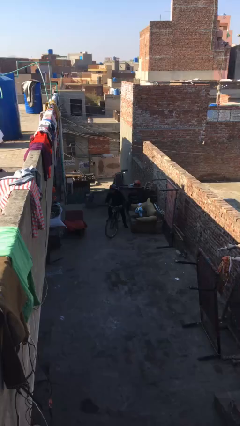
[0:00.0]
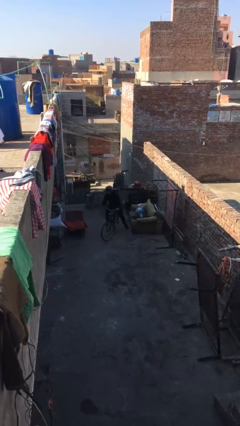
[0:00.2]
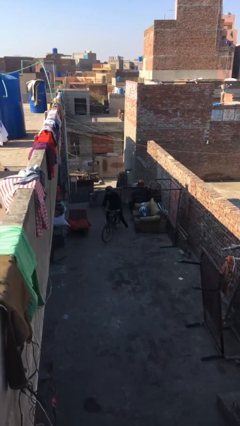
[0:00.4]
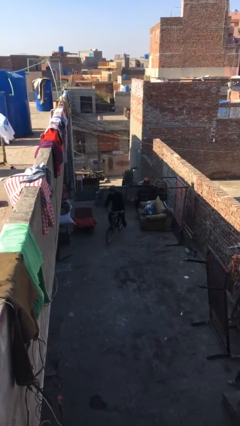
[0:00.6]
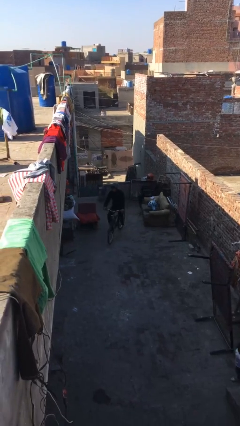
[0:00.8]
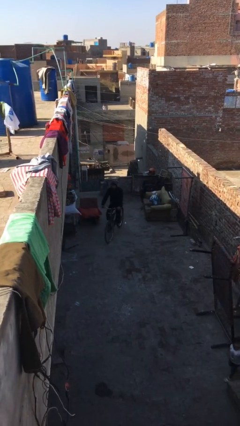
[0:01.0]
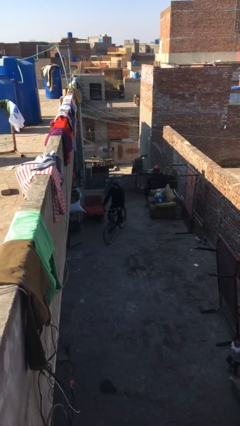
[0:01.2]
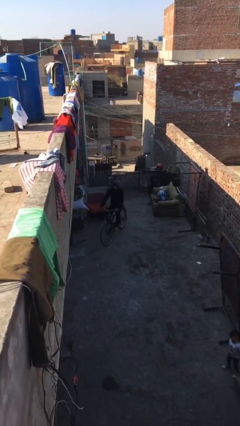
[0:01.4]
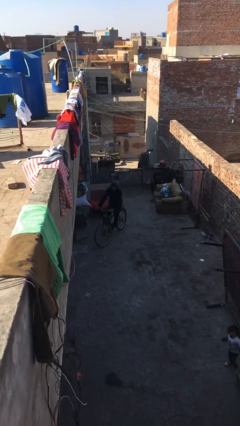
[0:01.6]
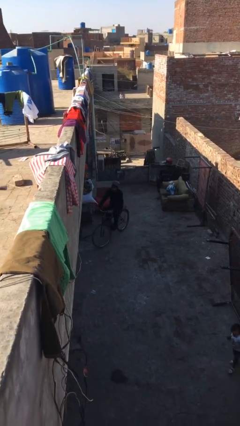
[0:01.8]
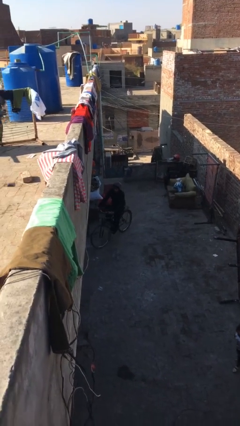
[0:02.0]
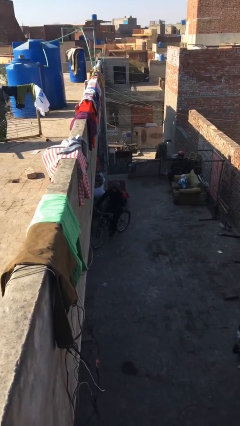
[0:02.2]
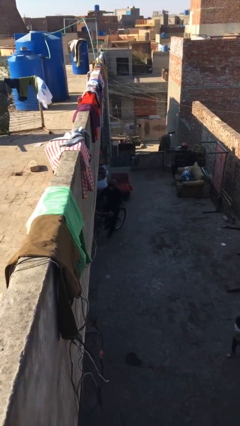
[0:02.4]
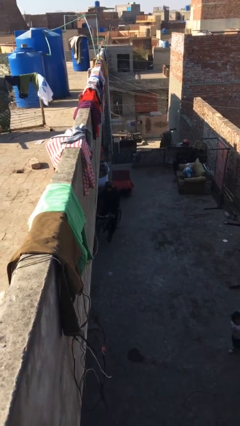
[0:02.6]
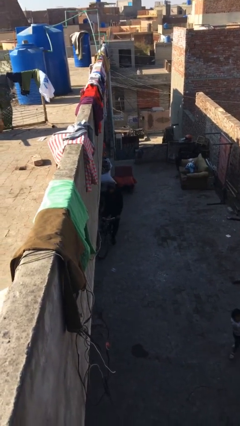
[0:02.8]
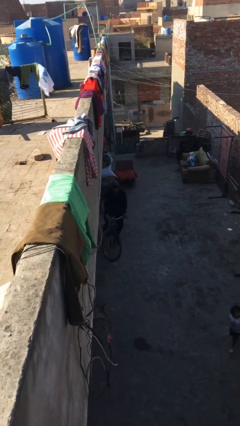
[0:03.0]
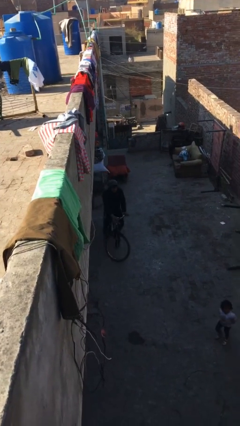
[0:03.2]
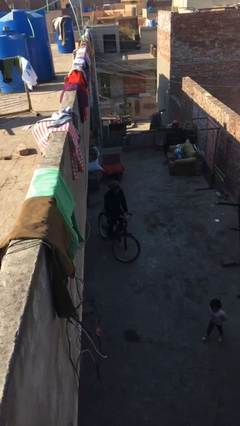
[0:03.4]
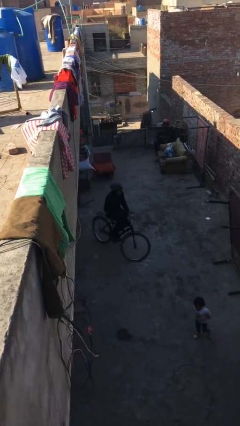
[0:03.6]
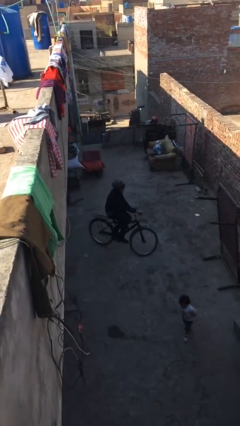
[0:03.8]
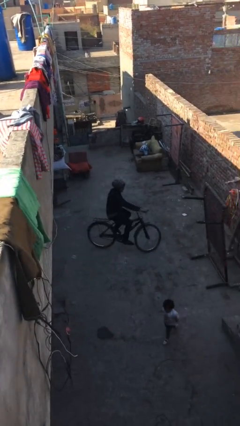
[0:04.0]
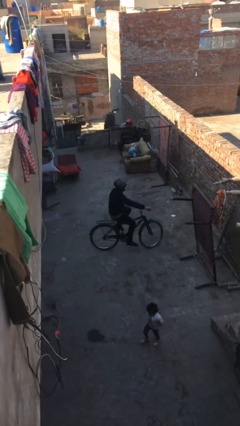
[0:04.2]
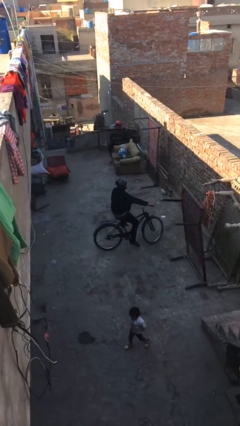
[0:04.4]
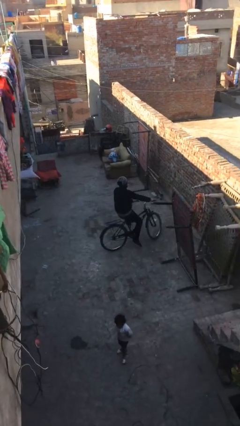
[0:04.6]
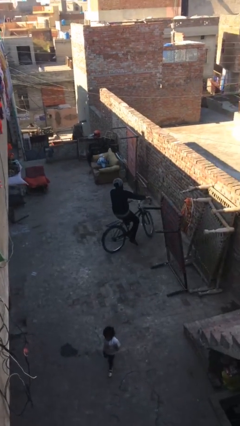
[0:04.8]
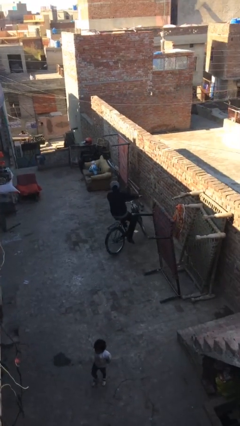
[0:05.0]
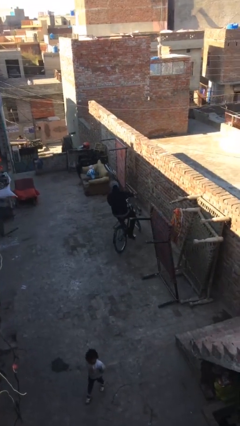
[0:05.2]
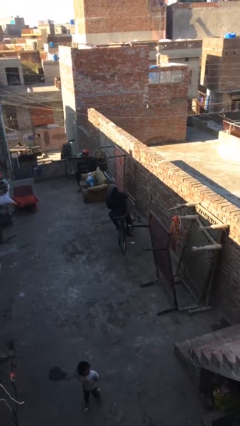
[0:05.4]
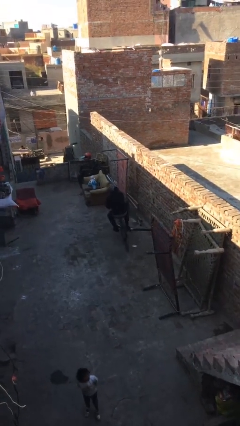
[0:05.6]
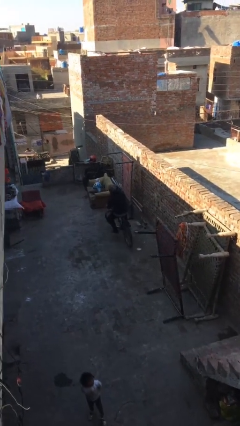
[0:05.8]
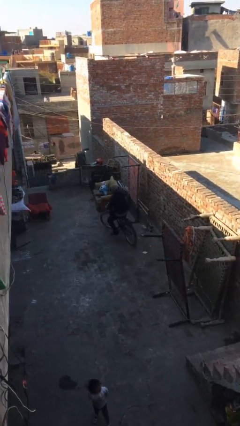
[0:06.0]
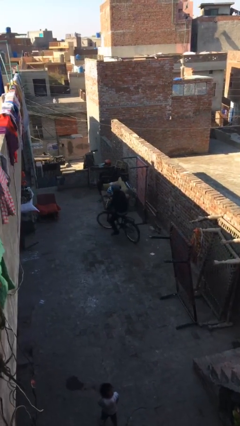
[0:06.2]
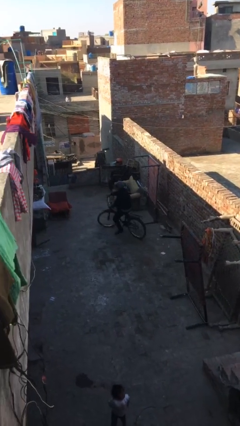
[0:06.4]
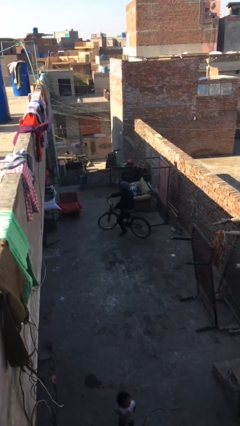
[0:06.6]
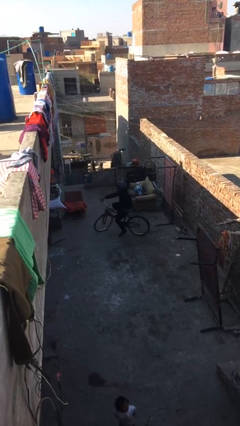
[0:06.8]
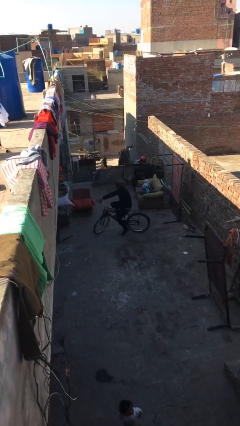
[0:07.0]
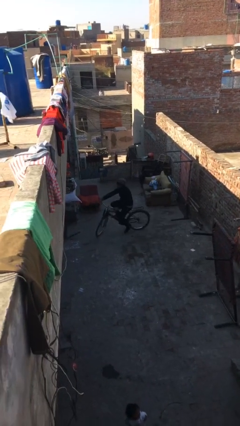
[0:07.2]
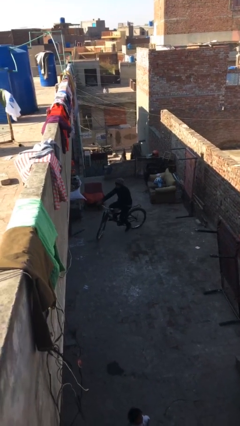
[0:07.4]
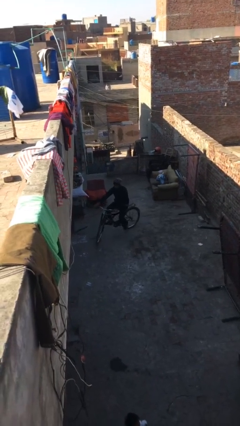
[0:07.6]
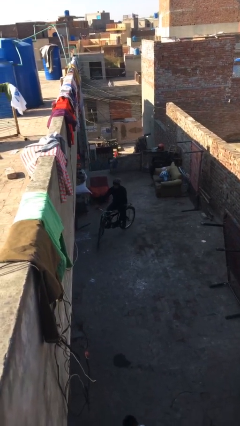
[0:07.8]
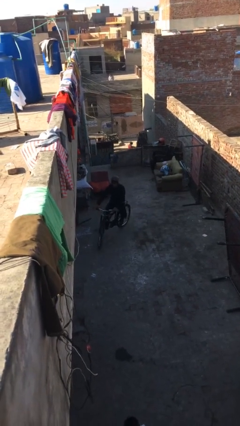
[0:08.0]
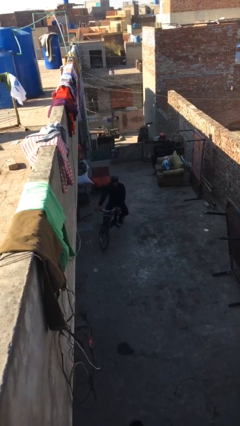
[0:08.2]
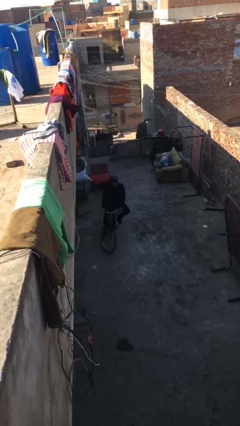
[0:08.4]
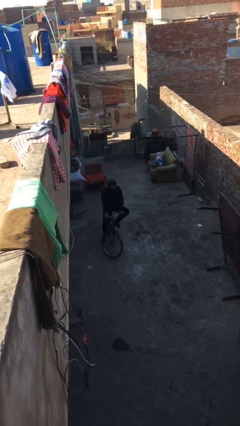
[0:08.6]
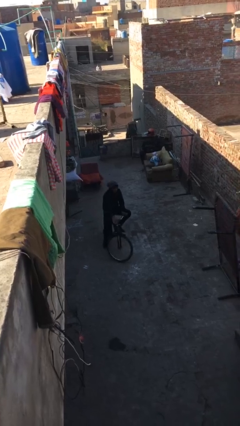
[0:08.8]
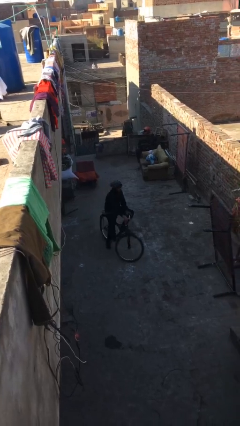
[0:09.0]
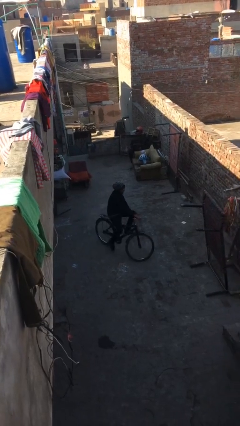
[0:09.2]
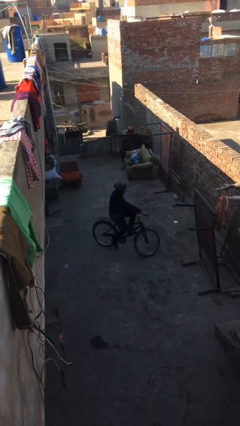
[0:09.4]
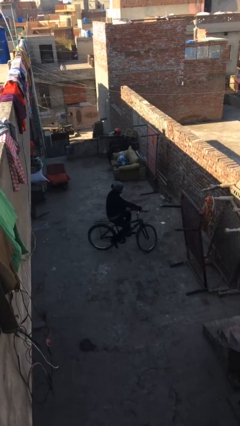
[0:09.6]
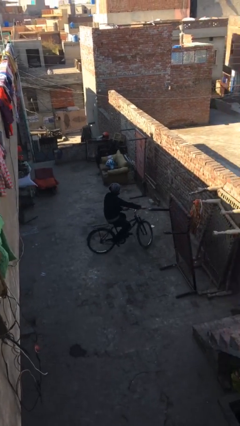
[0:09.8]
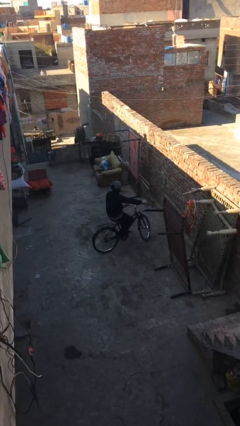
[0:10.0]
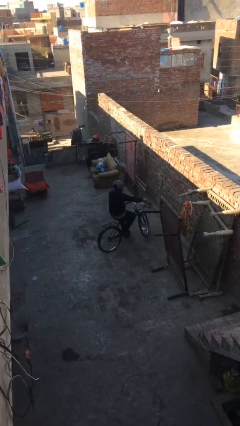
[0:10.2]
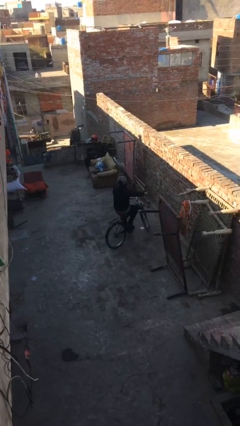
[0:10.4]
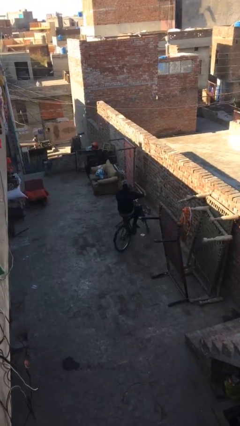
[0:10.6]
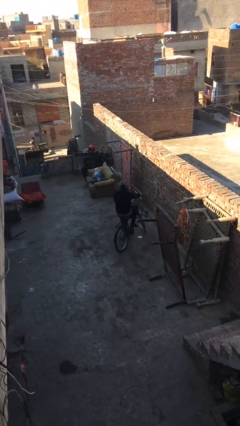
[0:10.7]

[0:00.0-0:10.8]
person rides bicycle

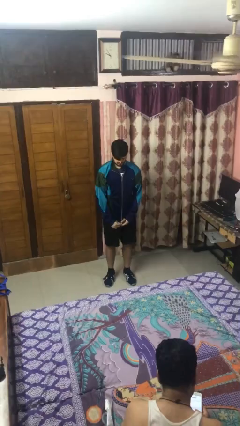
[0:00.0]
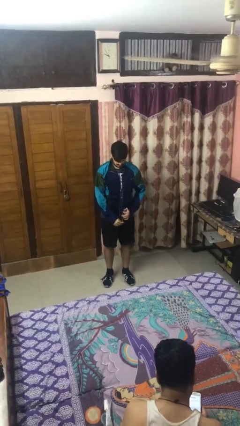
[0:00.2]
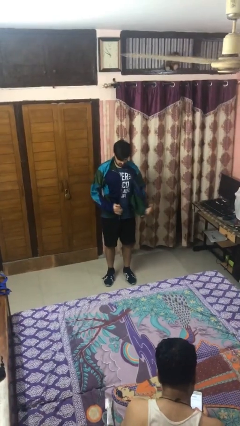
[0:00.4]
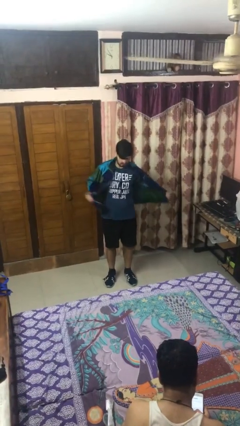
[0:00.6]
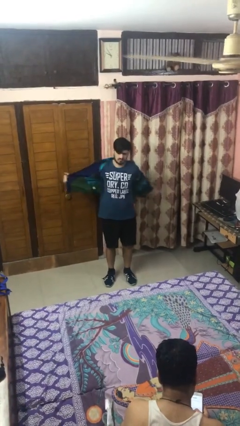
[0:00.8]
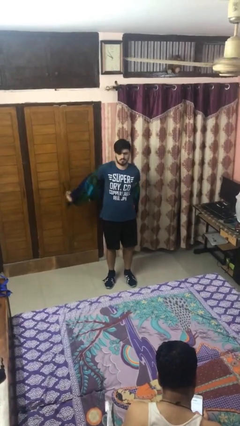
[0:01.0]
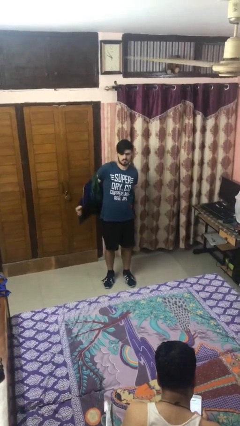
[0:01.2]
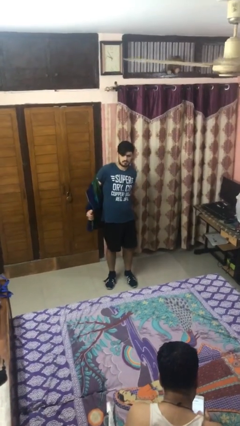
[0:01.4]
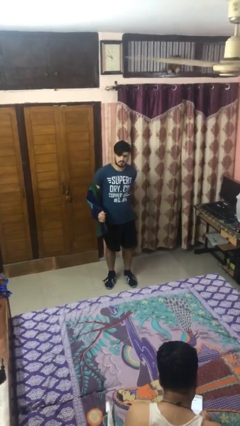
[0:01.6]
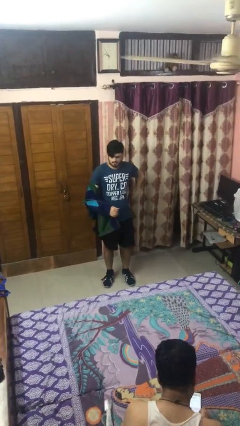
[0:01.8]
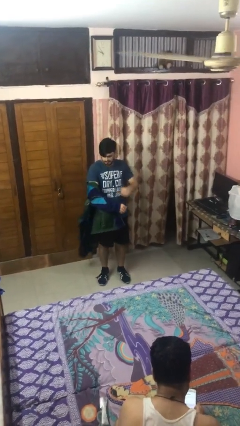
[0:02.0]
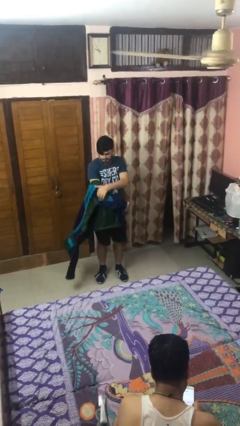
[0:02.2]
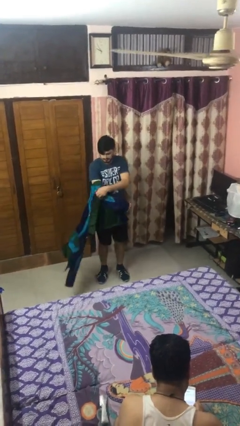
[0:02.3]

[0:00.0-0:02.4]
person takes off jacket

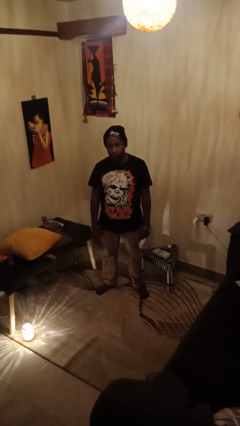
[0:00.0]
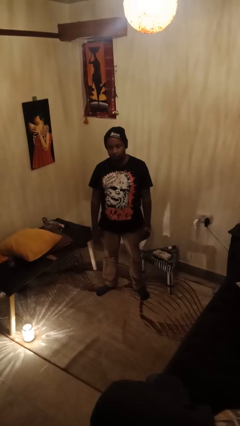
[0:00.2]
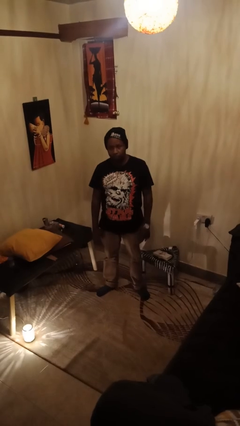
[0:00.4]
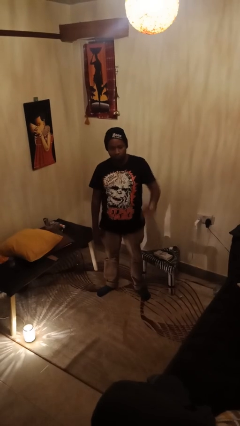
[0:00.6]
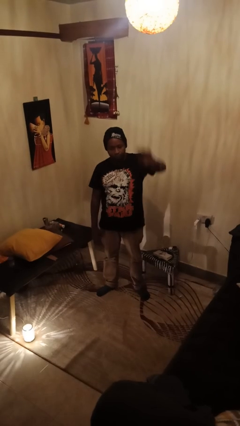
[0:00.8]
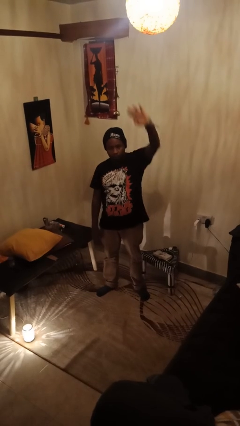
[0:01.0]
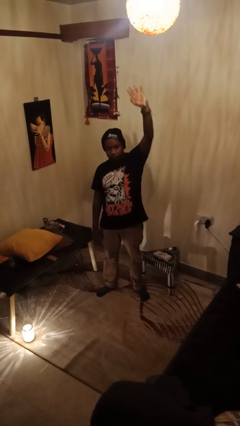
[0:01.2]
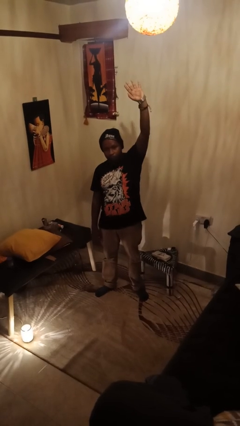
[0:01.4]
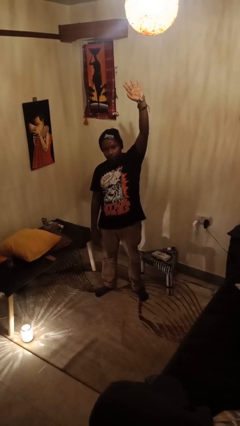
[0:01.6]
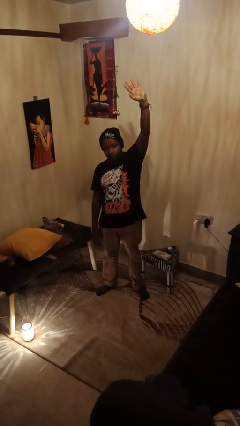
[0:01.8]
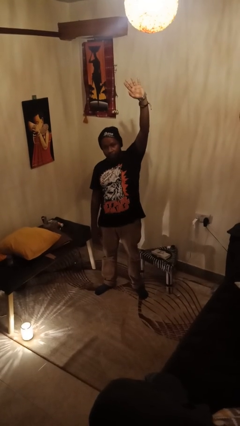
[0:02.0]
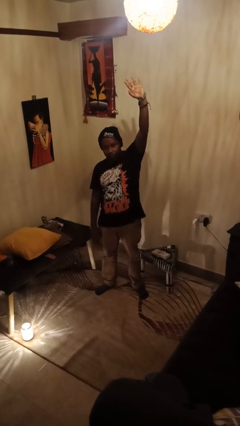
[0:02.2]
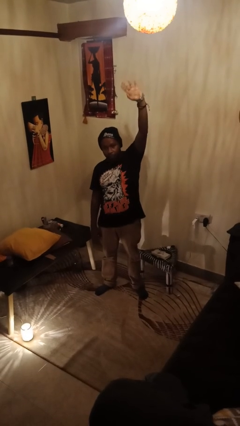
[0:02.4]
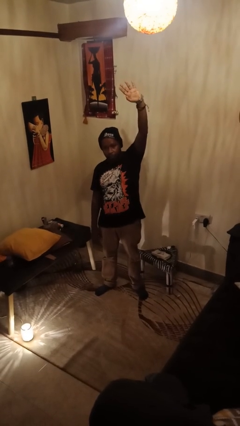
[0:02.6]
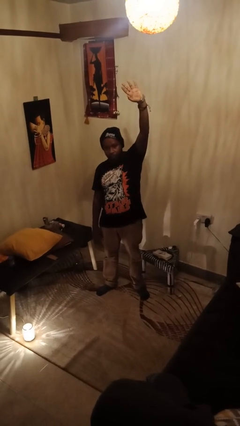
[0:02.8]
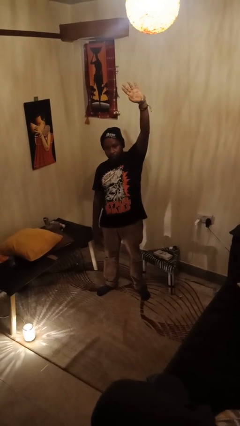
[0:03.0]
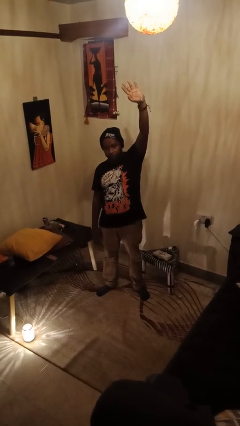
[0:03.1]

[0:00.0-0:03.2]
person gestures raise hand

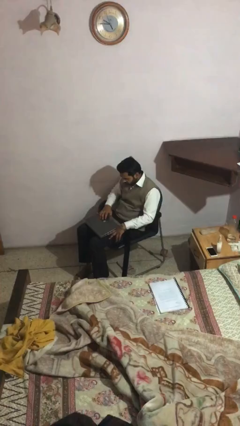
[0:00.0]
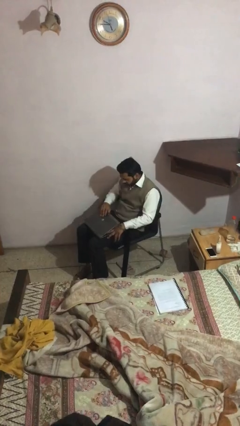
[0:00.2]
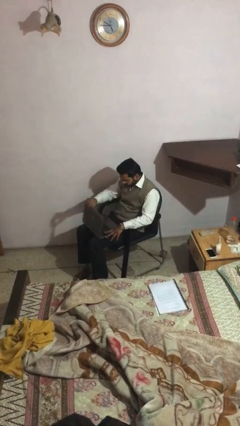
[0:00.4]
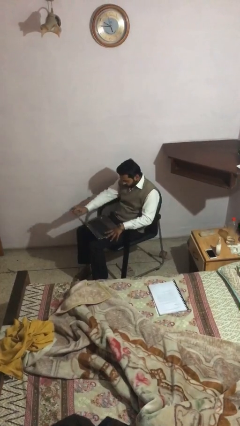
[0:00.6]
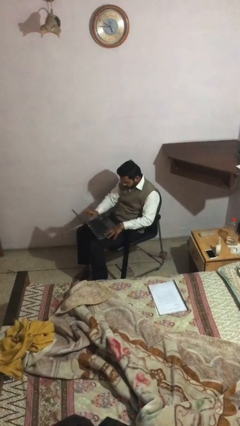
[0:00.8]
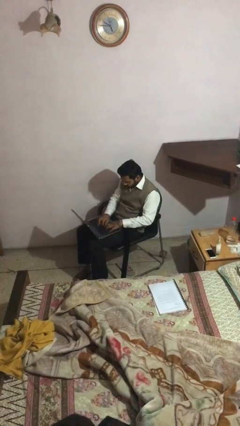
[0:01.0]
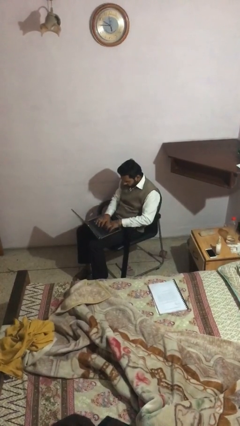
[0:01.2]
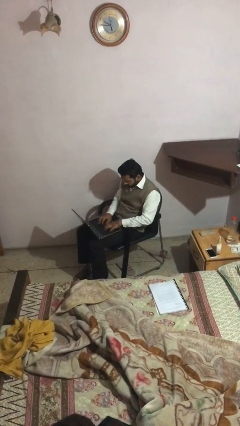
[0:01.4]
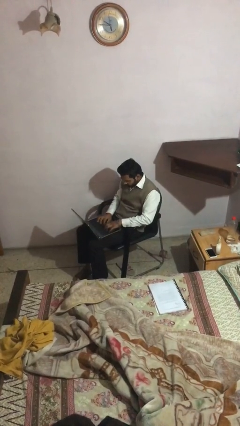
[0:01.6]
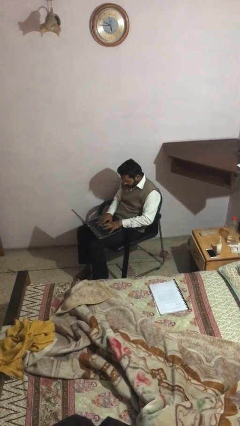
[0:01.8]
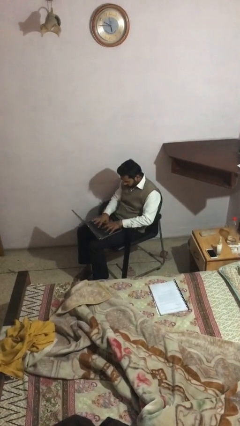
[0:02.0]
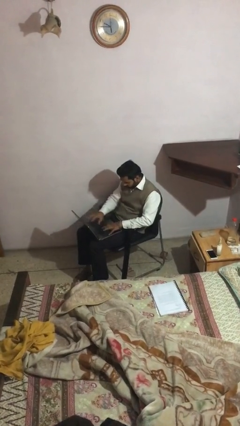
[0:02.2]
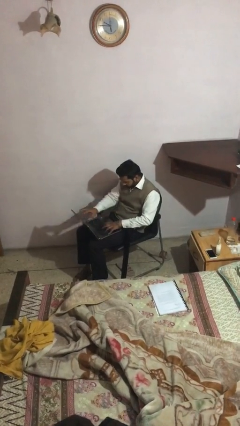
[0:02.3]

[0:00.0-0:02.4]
person interacts with laptop
